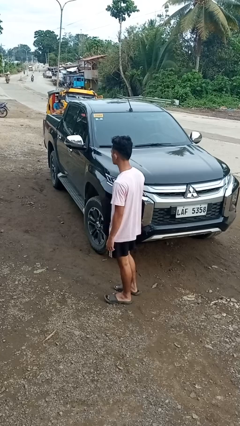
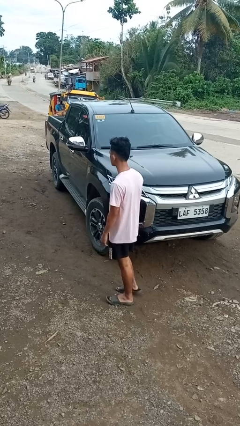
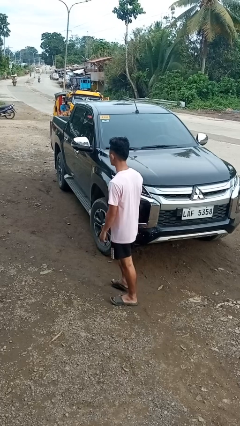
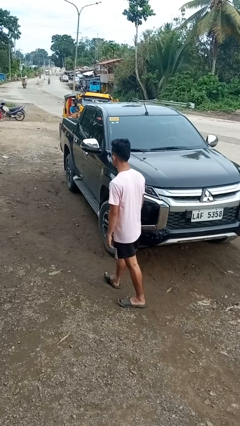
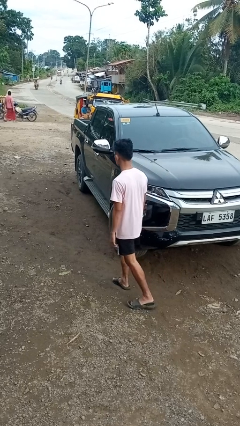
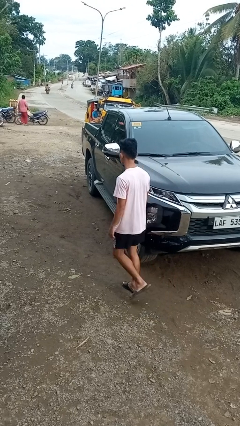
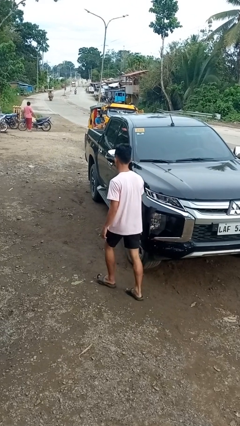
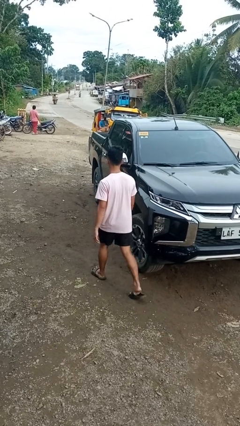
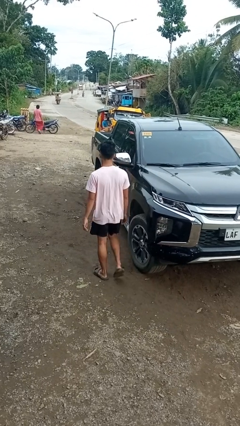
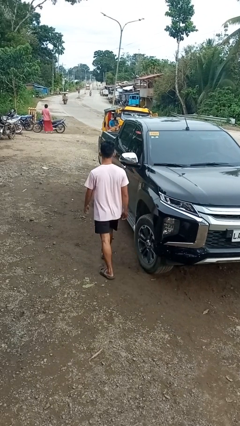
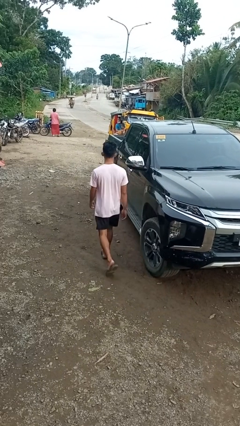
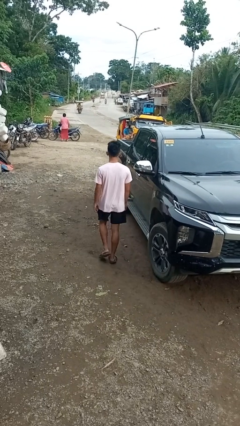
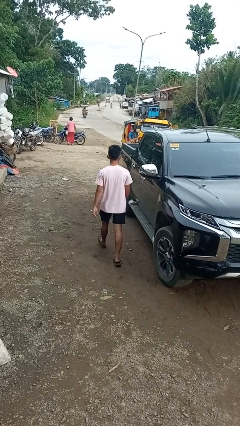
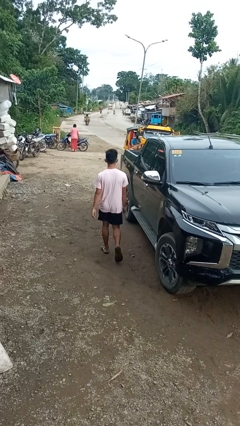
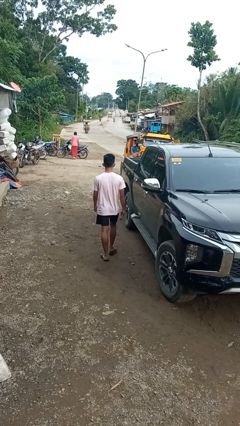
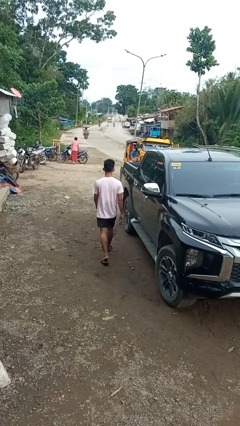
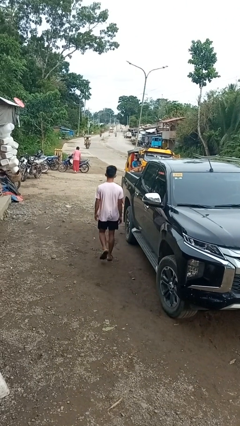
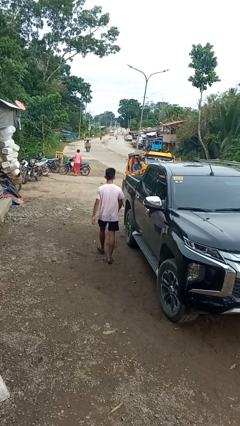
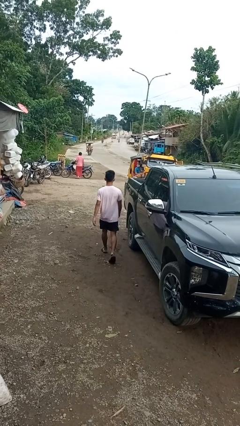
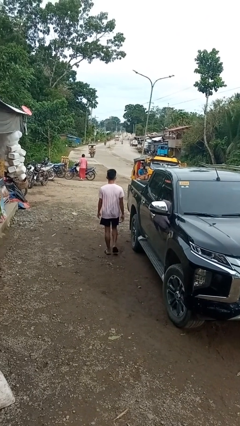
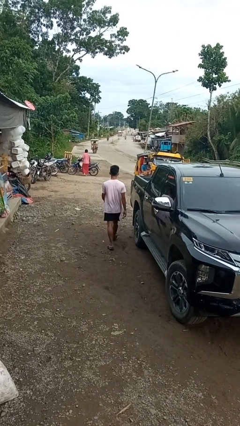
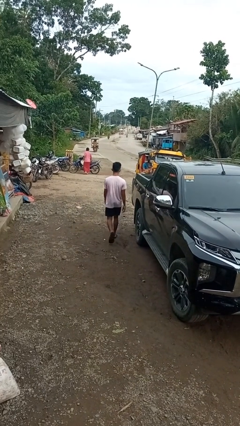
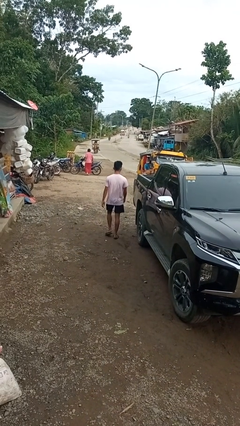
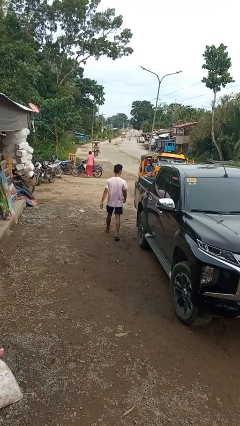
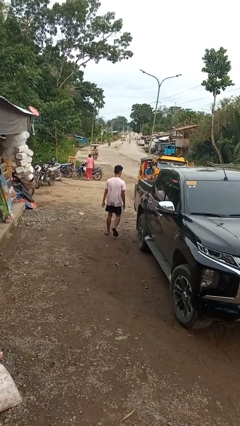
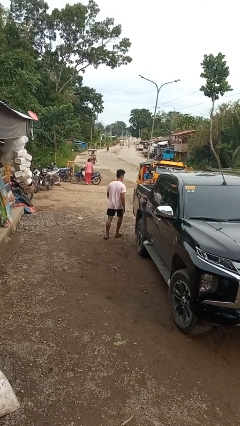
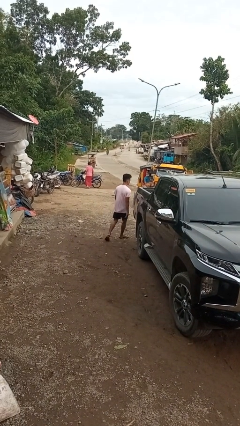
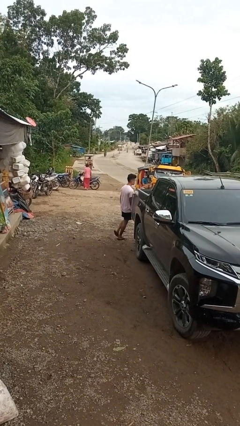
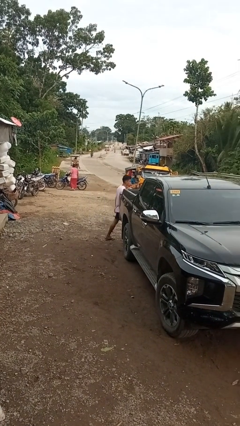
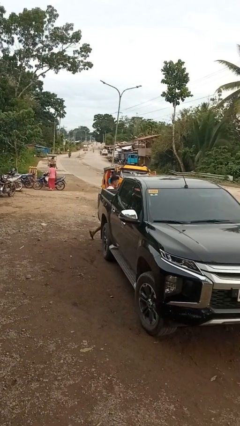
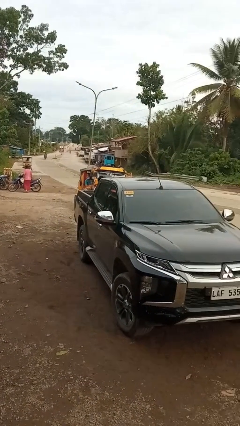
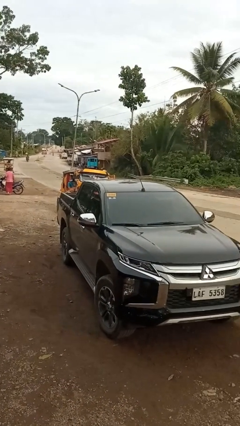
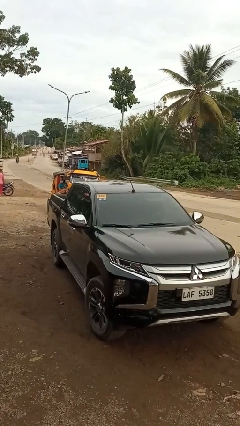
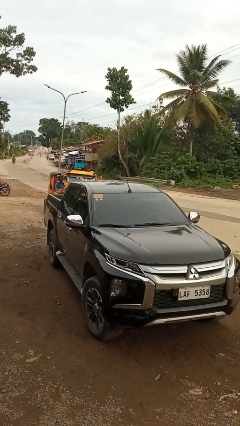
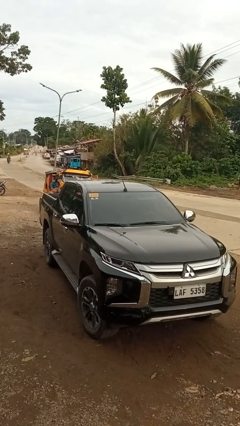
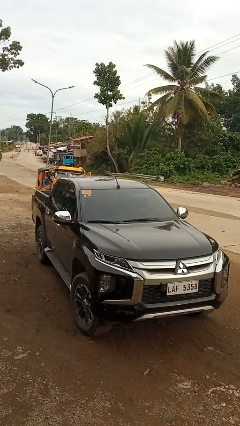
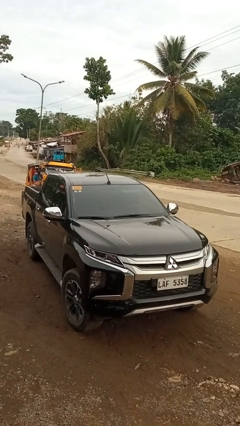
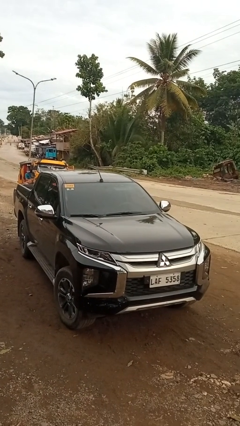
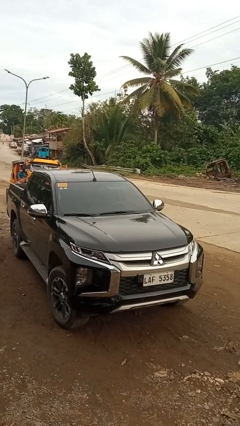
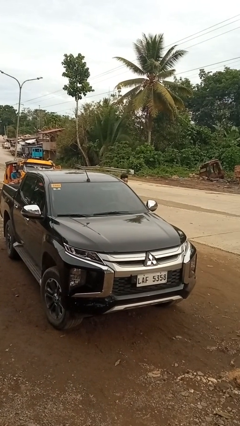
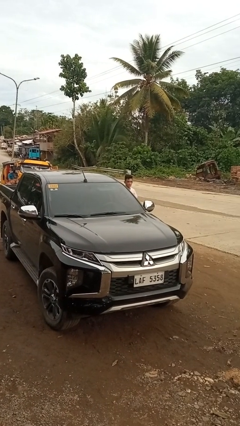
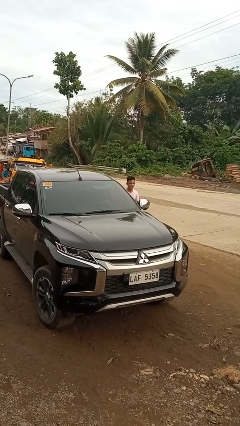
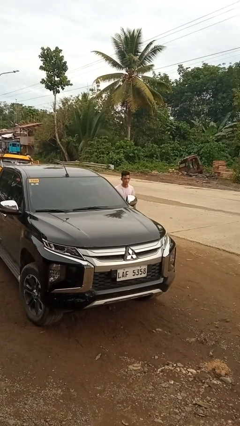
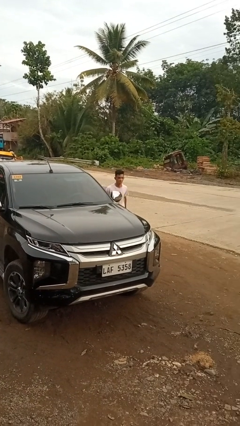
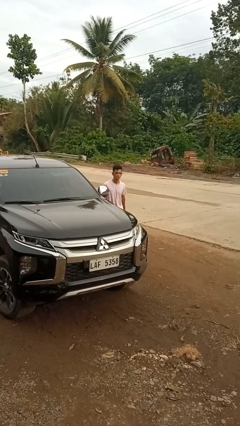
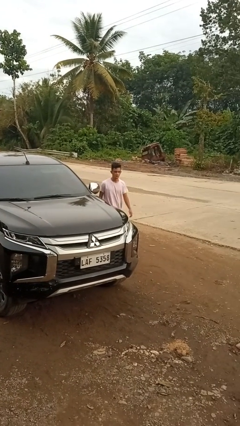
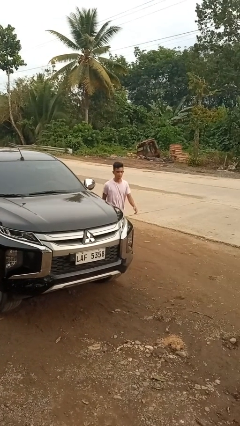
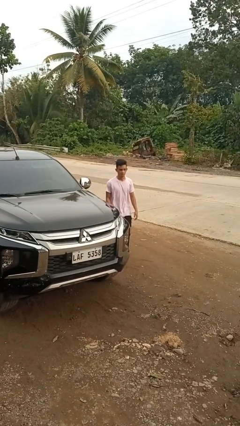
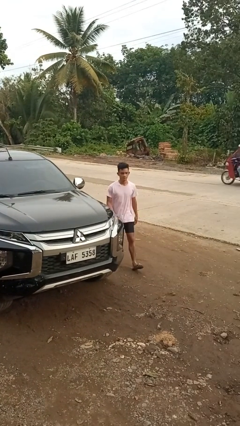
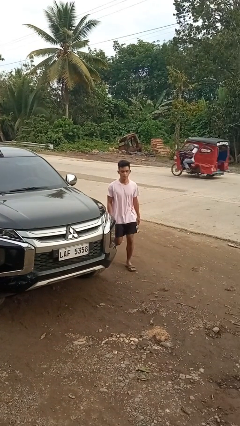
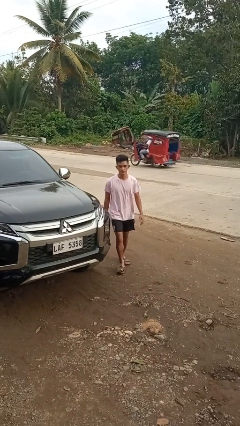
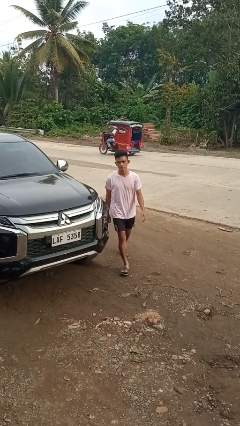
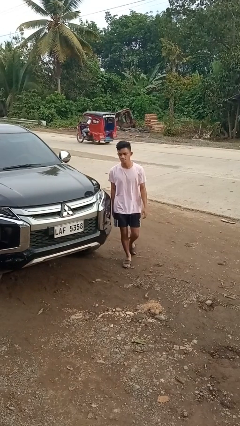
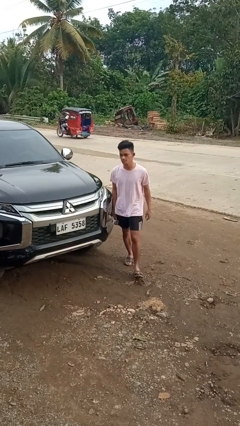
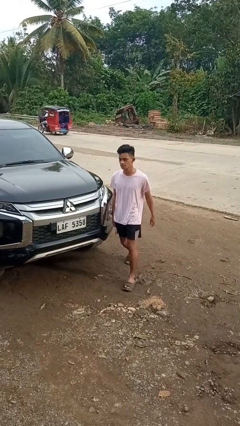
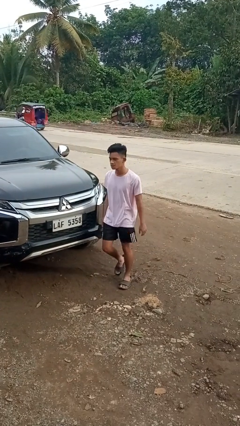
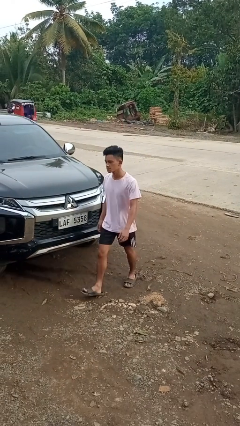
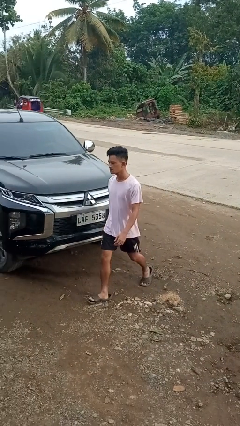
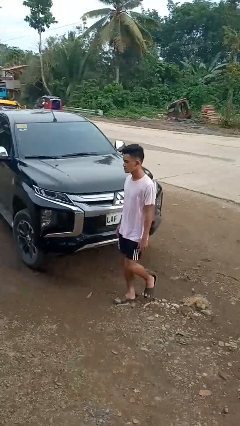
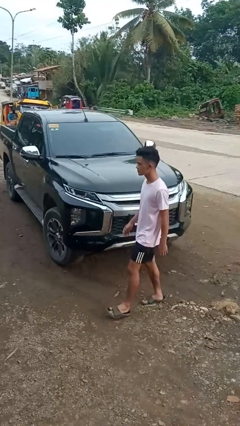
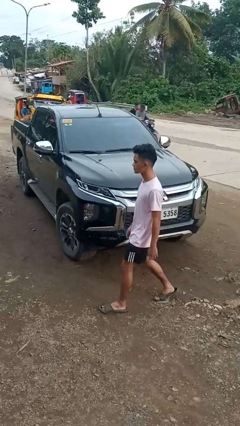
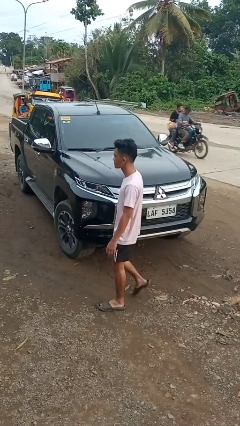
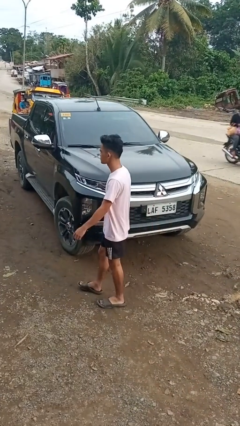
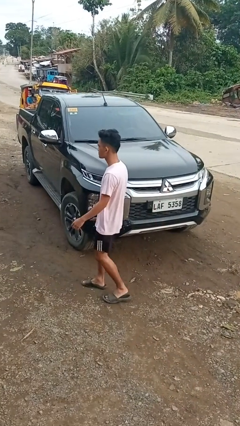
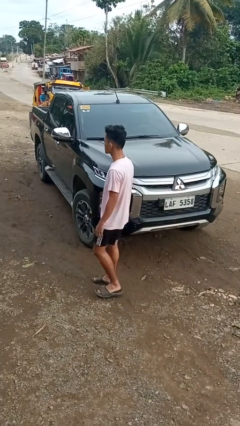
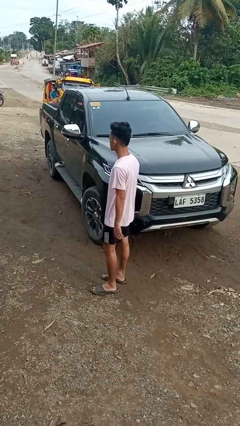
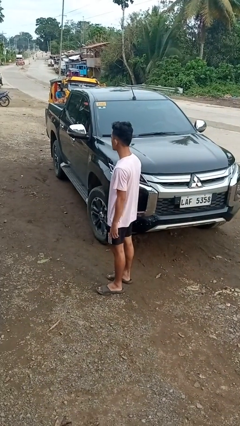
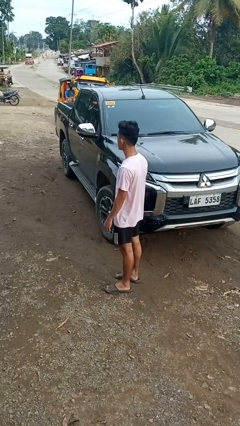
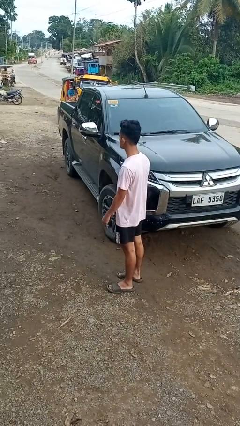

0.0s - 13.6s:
person walks around car

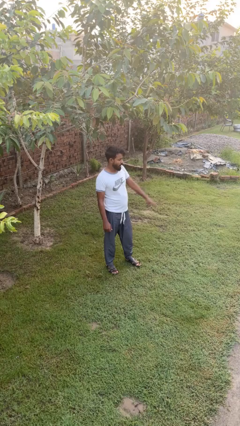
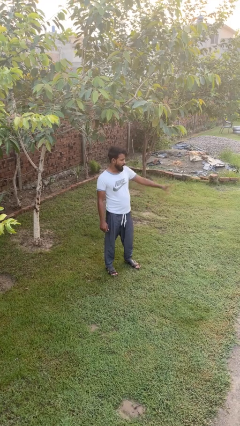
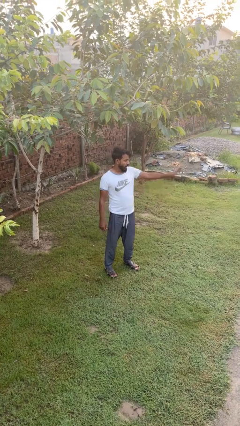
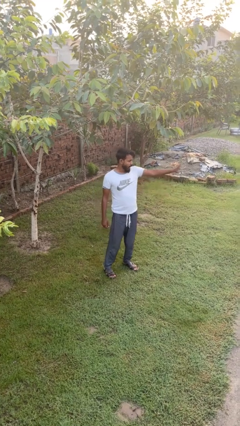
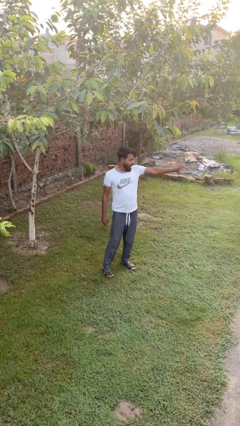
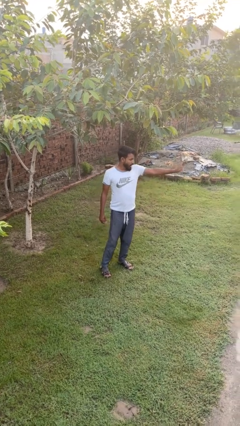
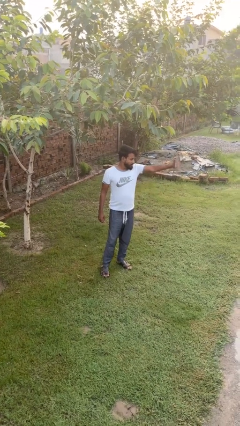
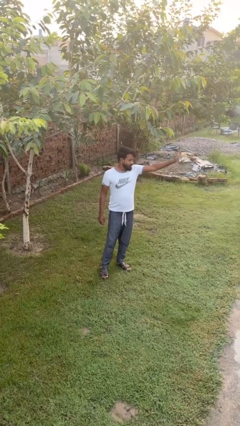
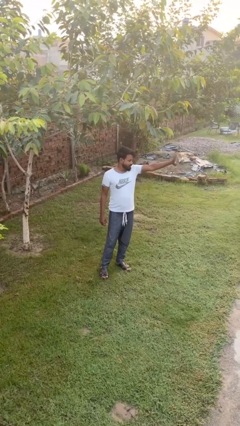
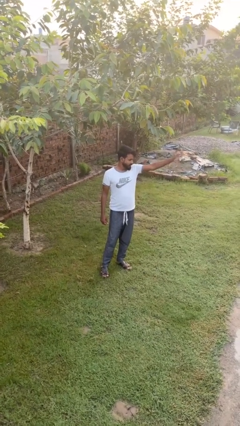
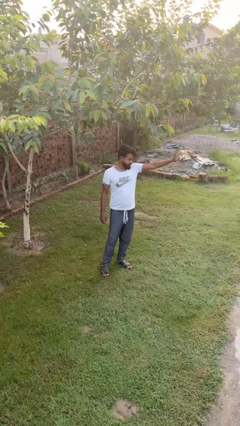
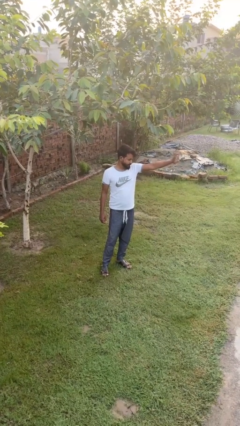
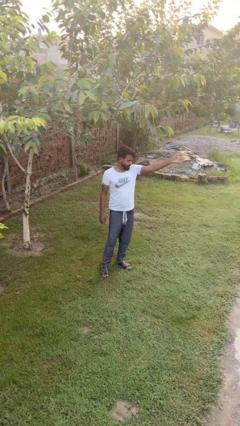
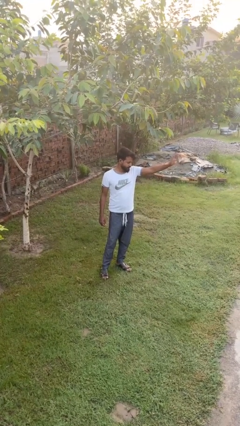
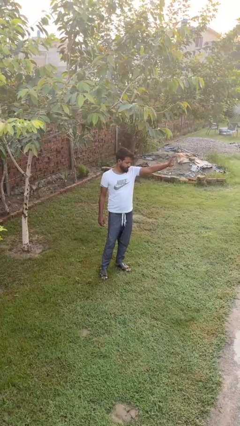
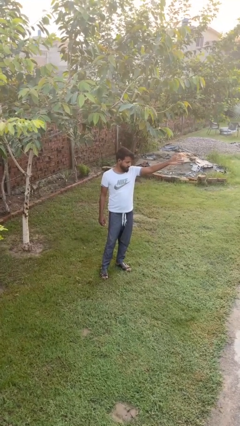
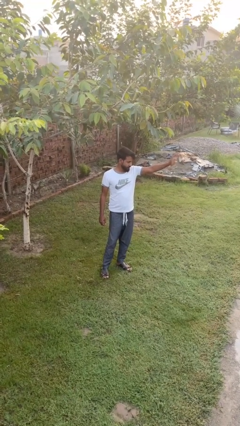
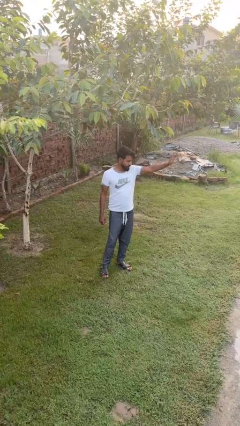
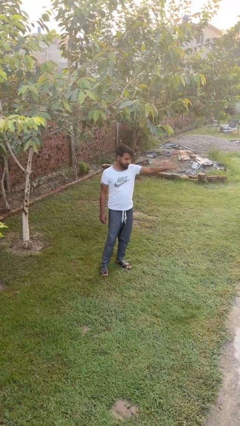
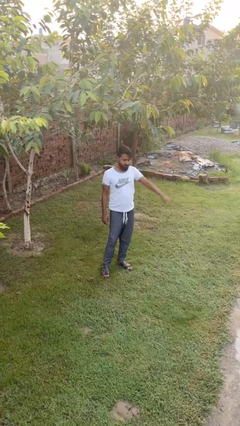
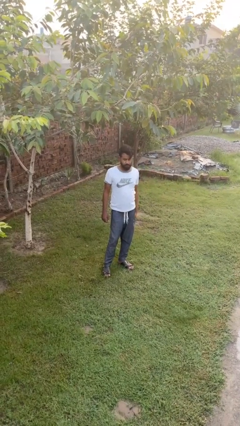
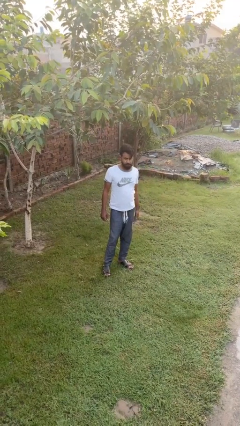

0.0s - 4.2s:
person waves at person
